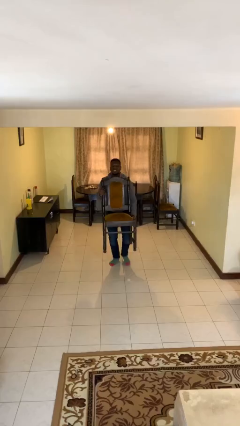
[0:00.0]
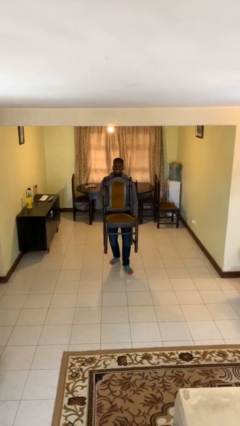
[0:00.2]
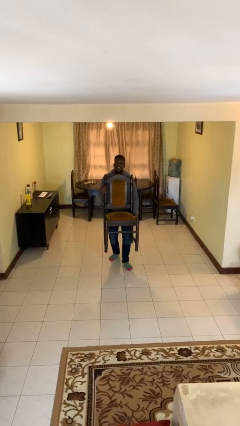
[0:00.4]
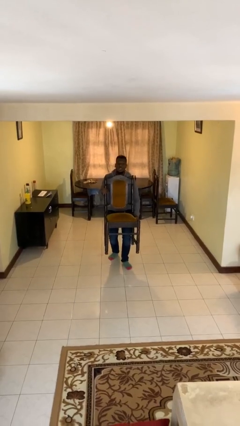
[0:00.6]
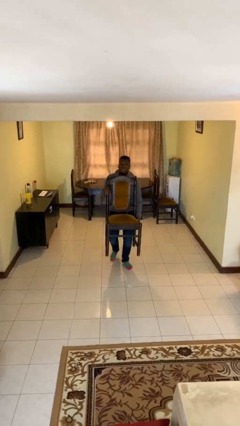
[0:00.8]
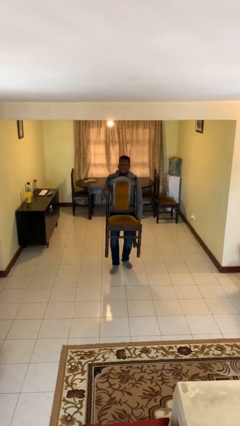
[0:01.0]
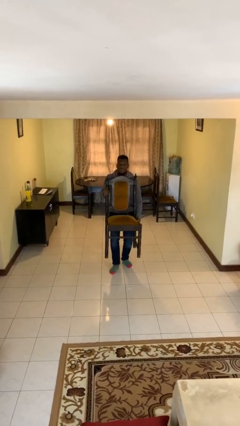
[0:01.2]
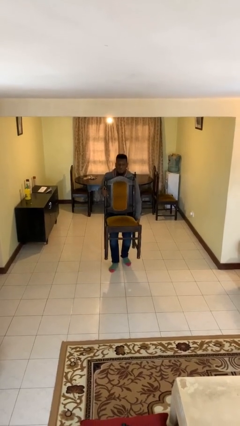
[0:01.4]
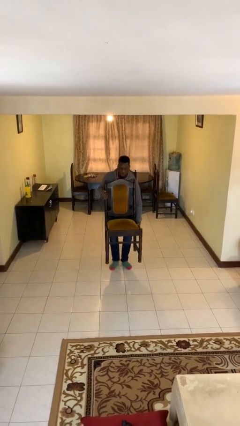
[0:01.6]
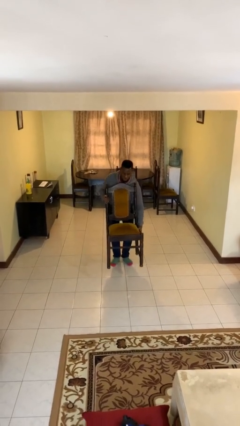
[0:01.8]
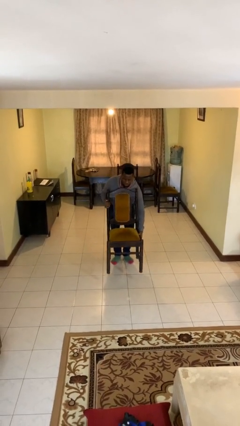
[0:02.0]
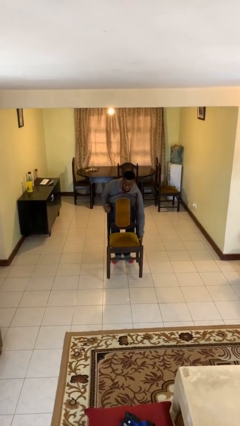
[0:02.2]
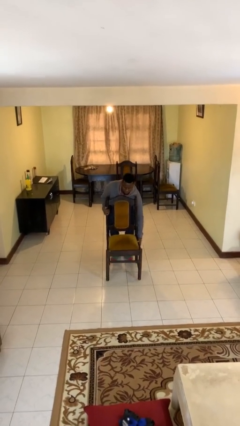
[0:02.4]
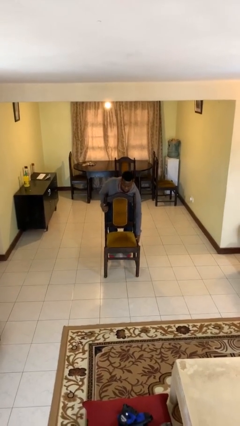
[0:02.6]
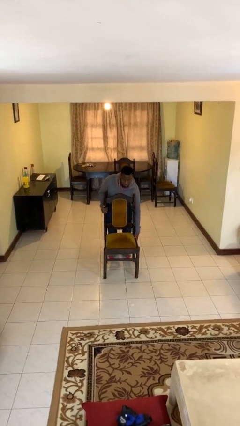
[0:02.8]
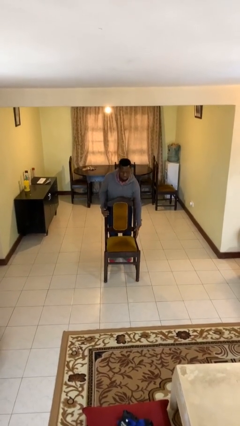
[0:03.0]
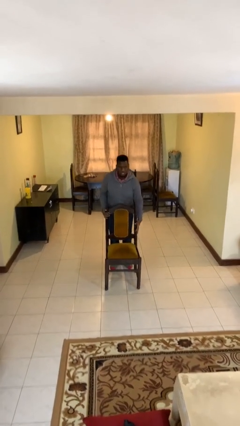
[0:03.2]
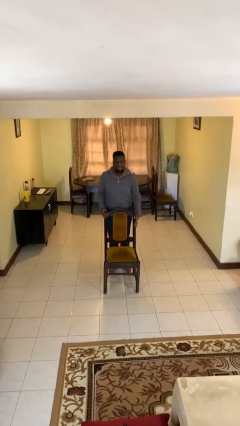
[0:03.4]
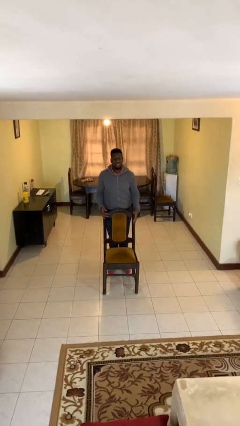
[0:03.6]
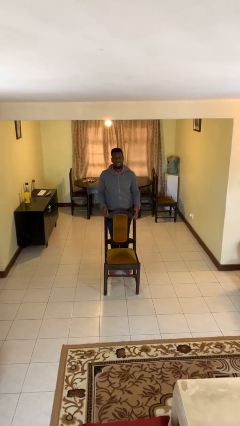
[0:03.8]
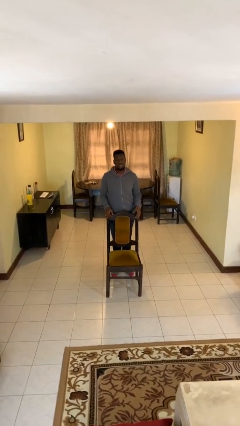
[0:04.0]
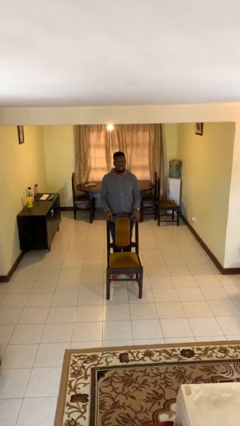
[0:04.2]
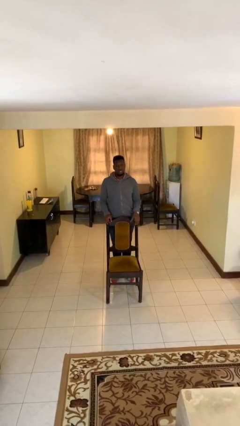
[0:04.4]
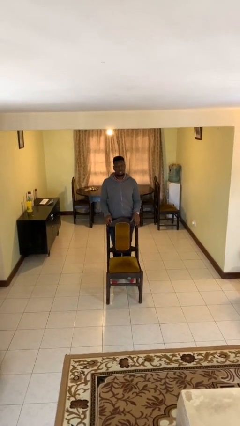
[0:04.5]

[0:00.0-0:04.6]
person puts down object on floor

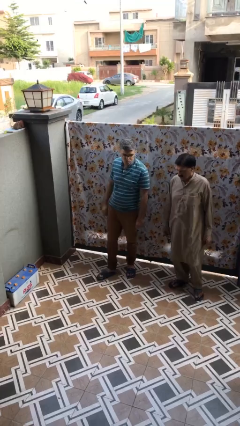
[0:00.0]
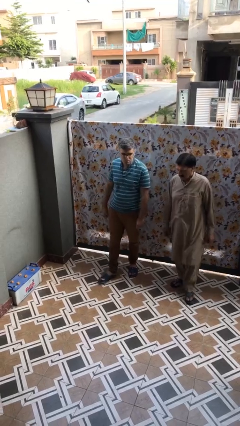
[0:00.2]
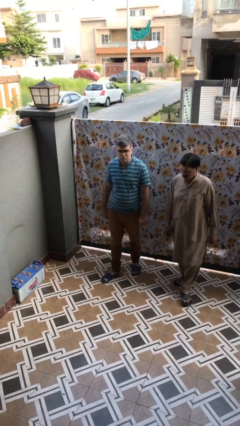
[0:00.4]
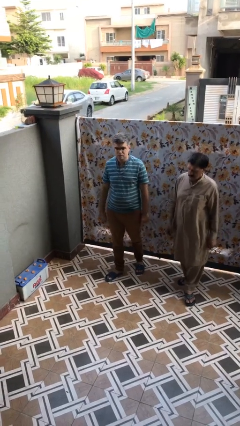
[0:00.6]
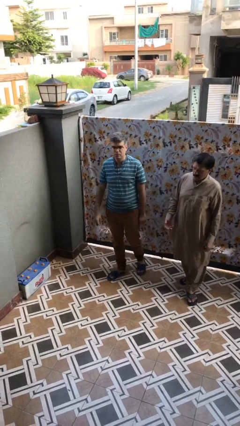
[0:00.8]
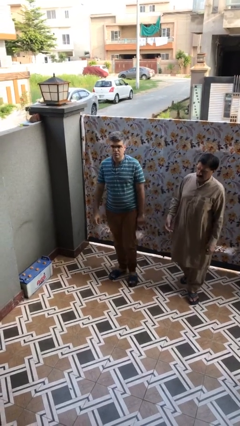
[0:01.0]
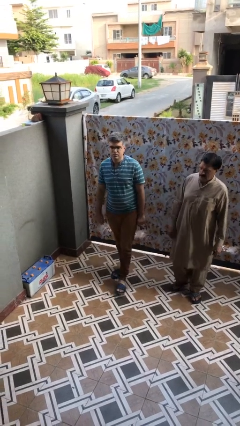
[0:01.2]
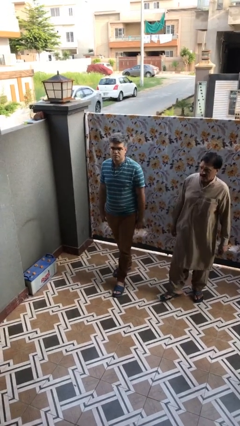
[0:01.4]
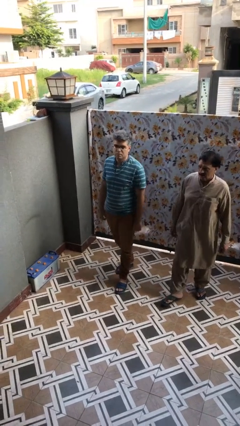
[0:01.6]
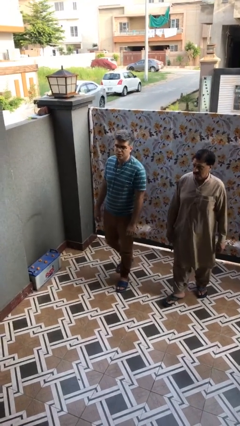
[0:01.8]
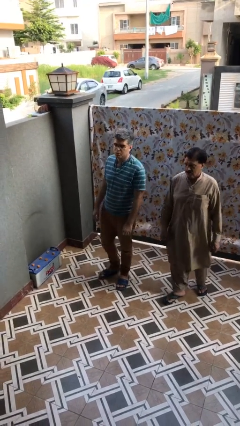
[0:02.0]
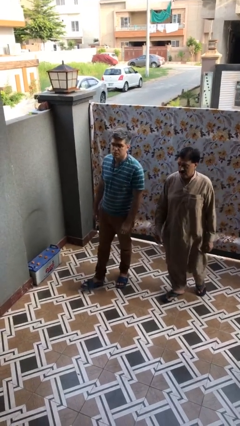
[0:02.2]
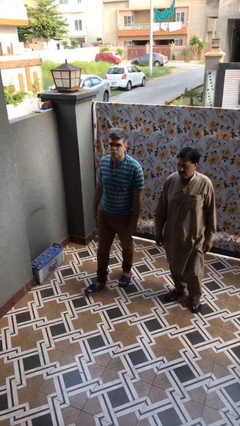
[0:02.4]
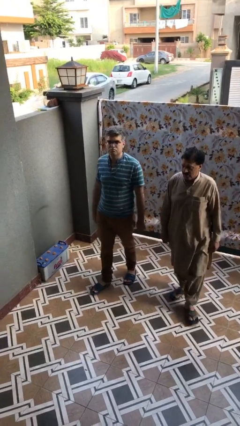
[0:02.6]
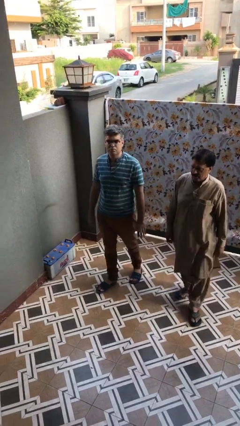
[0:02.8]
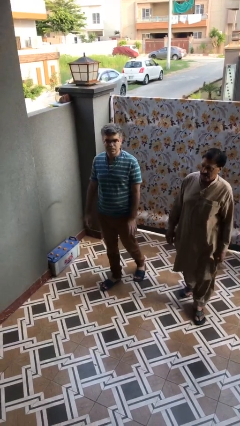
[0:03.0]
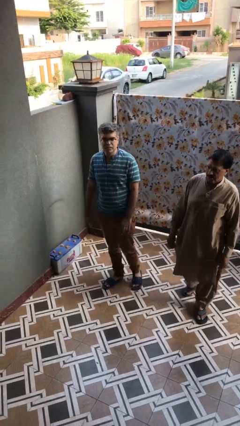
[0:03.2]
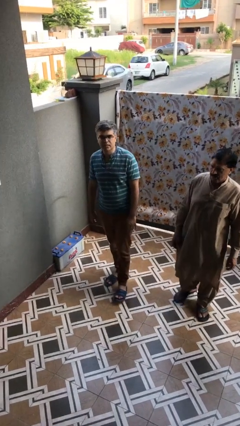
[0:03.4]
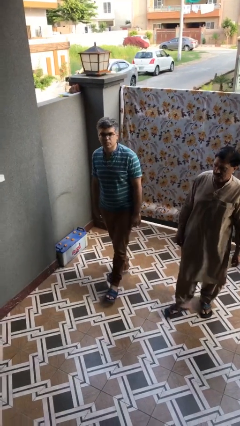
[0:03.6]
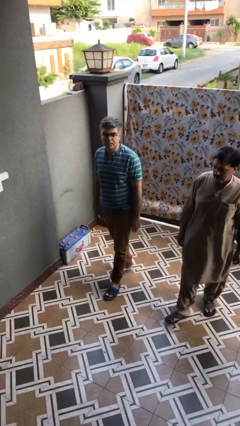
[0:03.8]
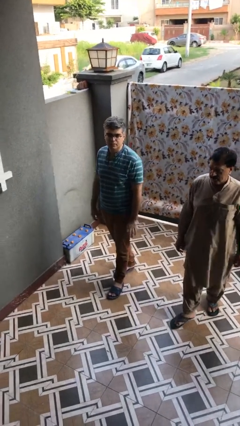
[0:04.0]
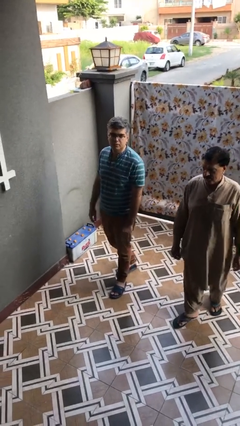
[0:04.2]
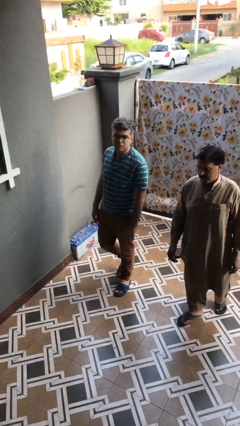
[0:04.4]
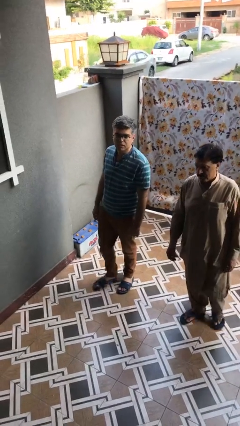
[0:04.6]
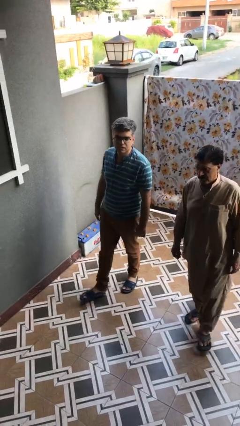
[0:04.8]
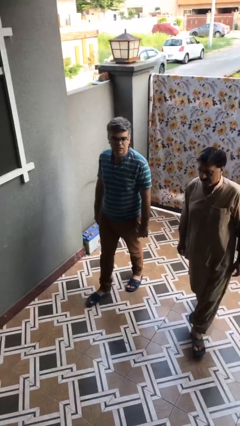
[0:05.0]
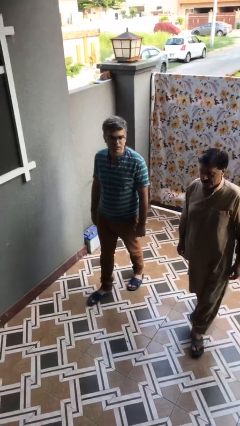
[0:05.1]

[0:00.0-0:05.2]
person talks to person

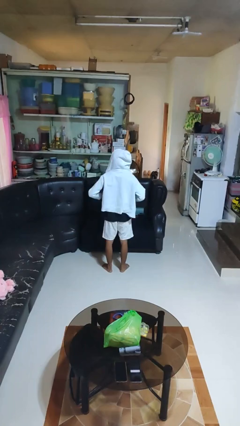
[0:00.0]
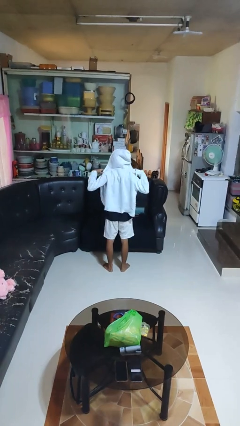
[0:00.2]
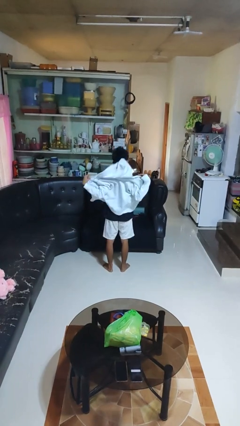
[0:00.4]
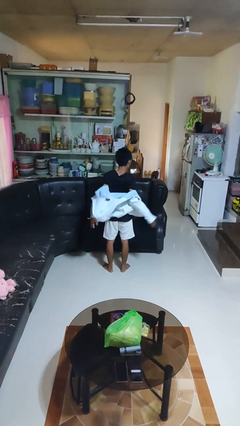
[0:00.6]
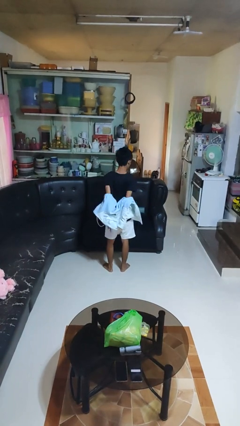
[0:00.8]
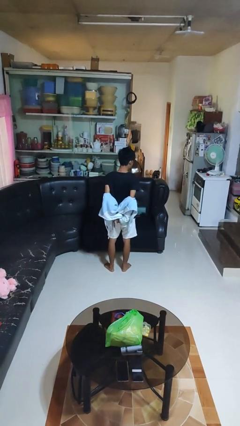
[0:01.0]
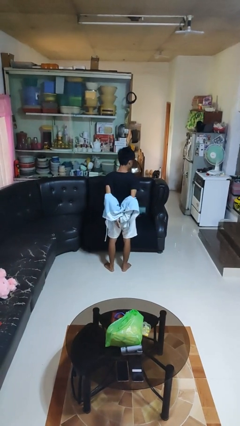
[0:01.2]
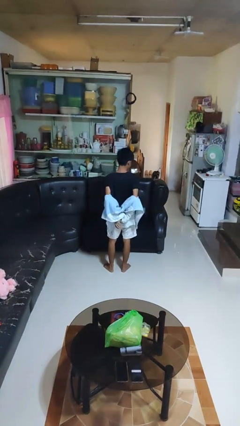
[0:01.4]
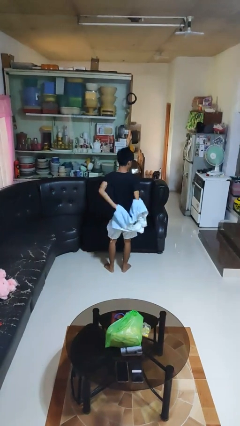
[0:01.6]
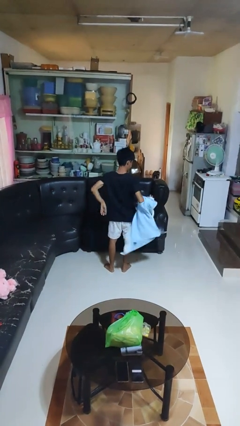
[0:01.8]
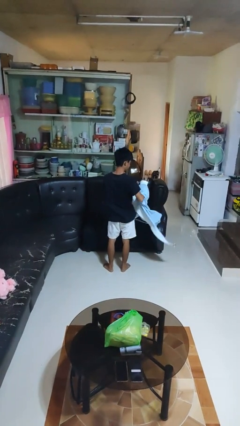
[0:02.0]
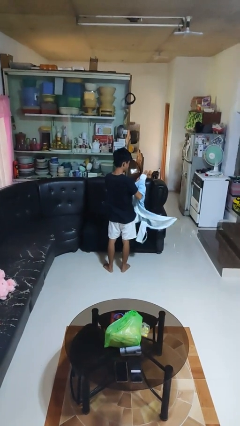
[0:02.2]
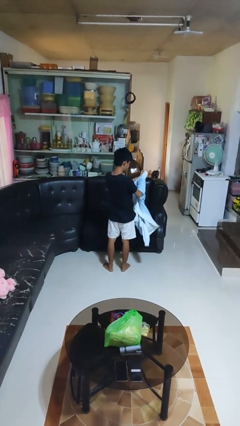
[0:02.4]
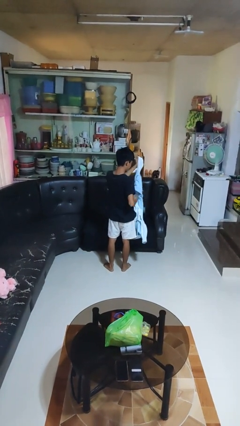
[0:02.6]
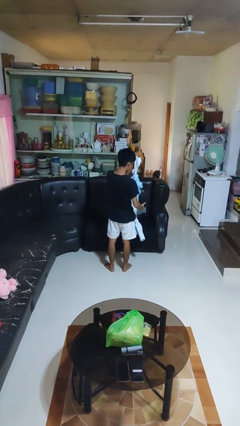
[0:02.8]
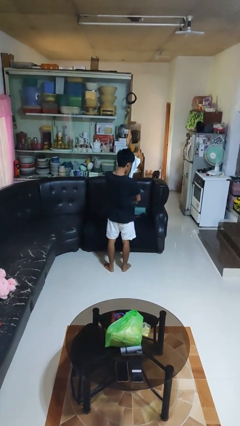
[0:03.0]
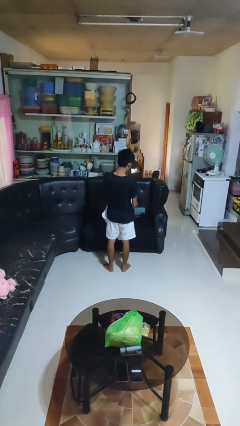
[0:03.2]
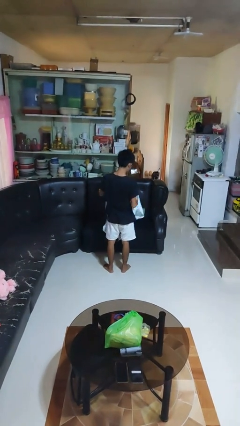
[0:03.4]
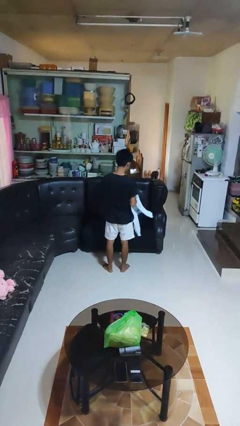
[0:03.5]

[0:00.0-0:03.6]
person takes off hoodie

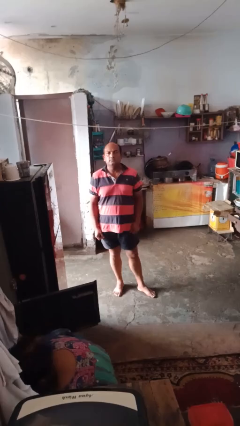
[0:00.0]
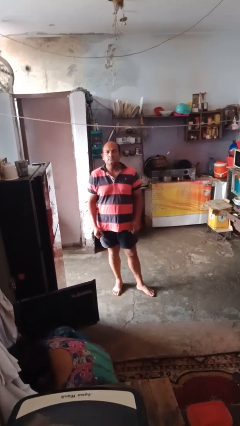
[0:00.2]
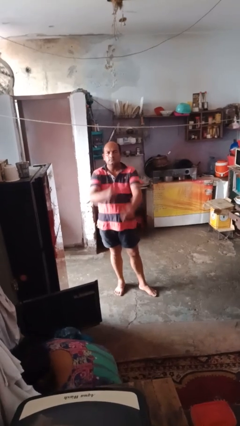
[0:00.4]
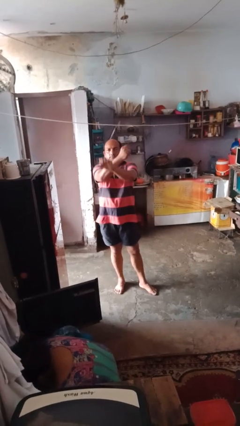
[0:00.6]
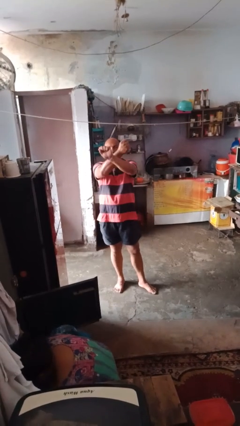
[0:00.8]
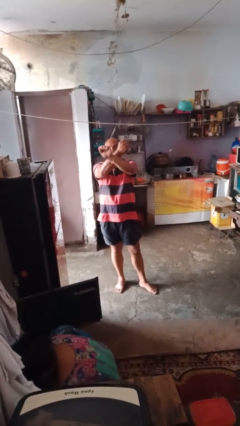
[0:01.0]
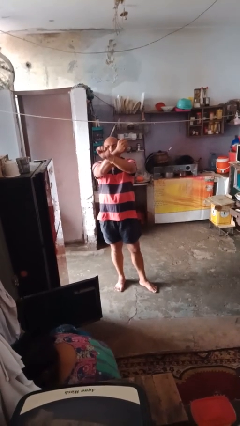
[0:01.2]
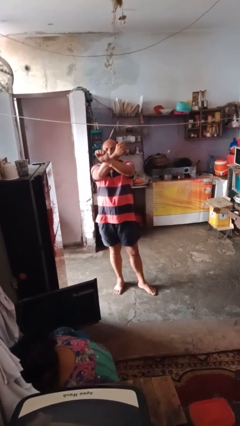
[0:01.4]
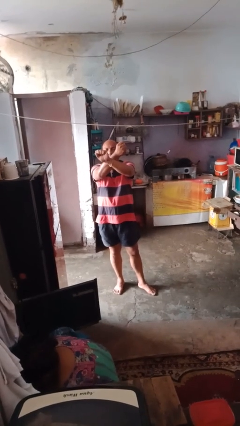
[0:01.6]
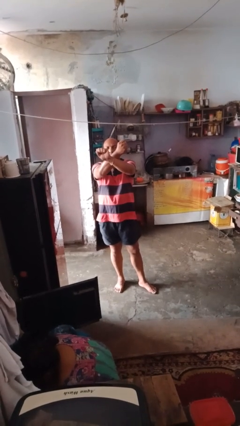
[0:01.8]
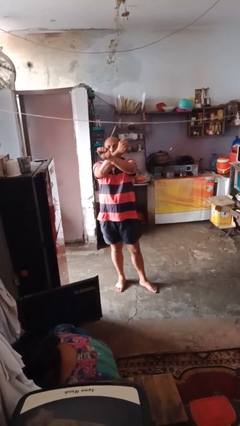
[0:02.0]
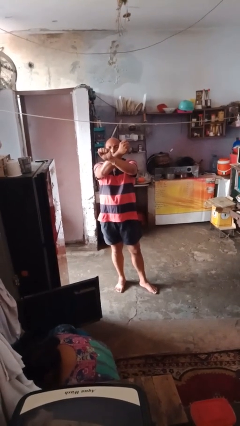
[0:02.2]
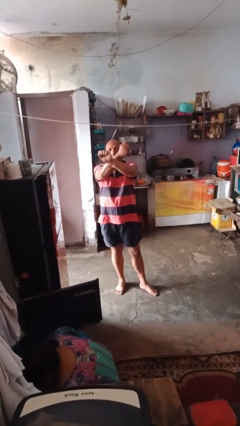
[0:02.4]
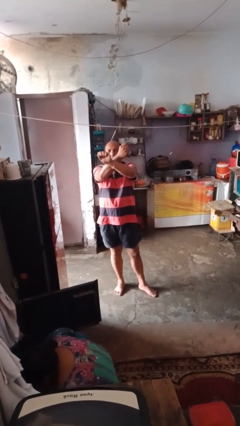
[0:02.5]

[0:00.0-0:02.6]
person gestures arms x

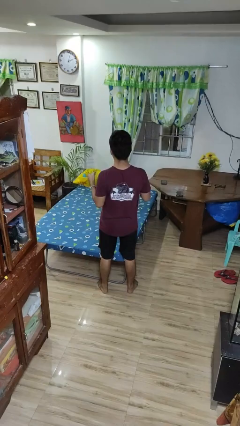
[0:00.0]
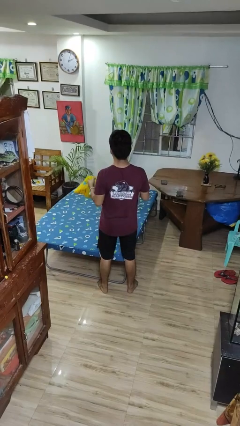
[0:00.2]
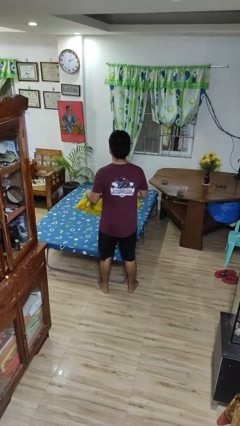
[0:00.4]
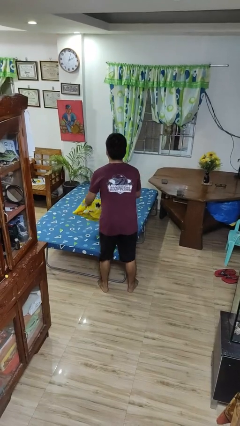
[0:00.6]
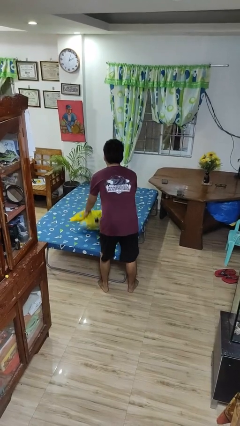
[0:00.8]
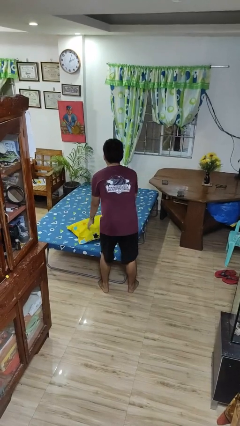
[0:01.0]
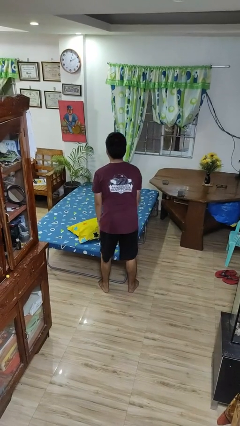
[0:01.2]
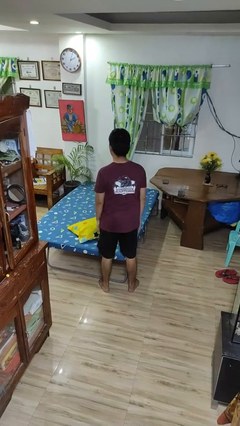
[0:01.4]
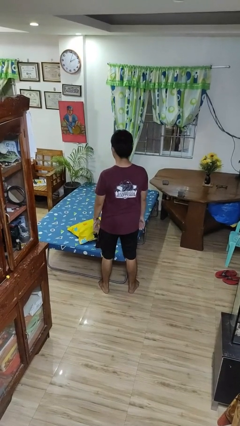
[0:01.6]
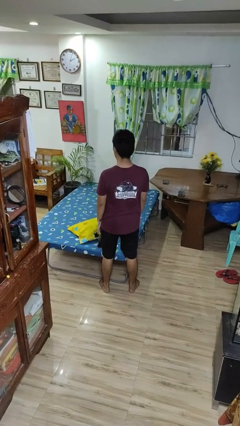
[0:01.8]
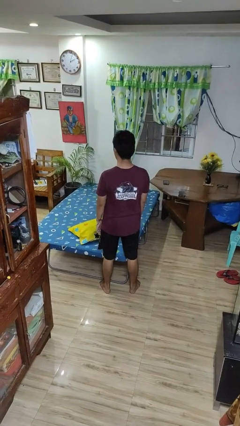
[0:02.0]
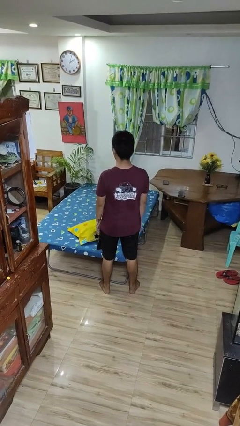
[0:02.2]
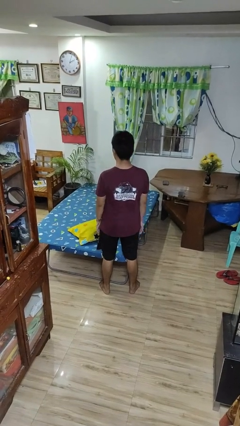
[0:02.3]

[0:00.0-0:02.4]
person puts down object on bed
